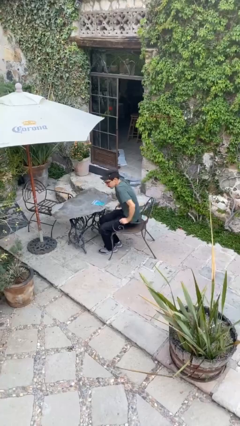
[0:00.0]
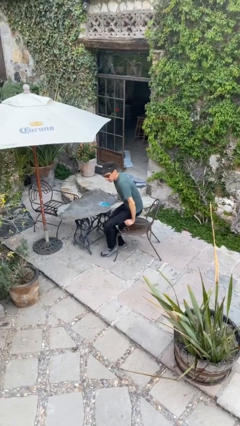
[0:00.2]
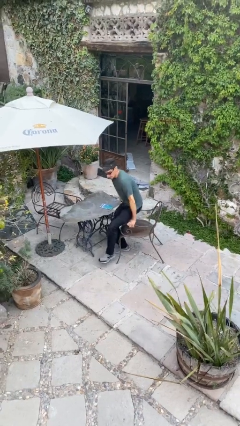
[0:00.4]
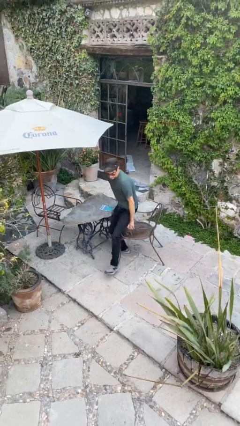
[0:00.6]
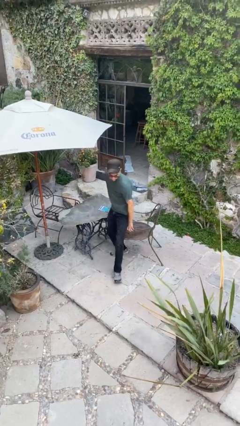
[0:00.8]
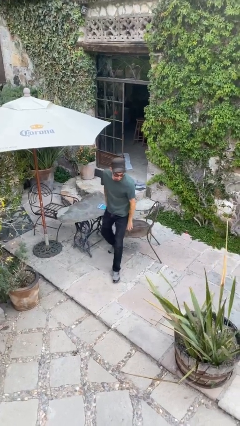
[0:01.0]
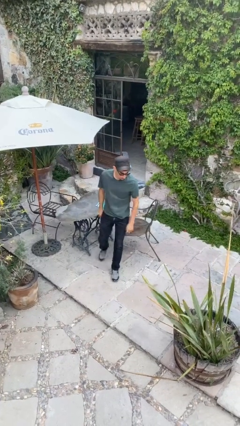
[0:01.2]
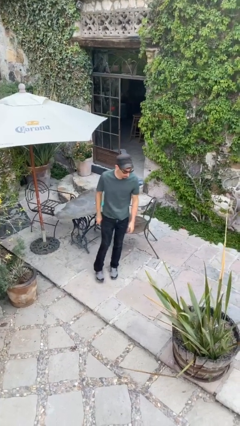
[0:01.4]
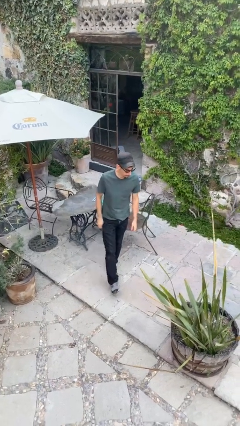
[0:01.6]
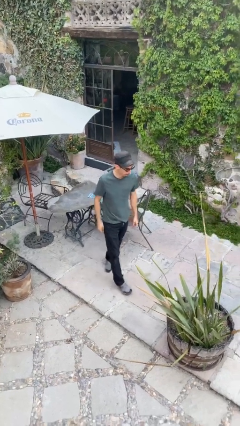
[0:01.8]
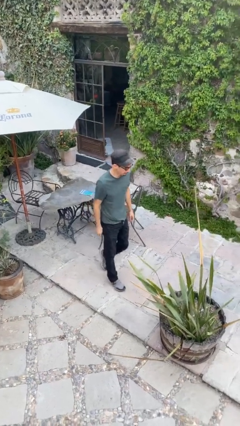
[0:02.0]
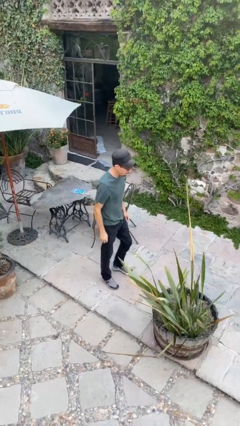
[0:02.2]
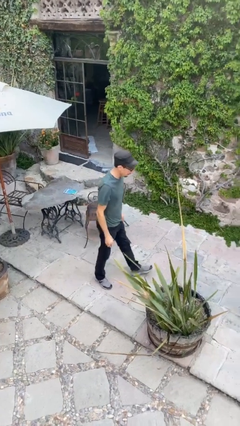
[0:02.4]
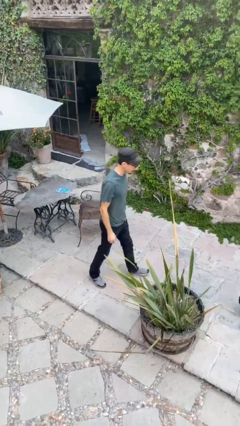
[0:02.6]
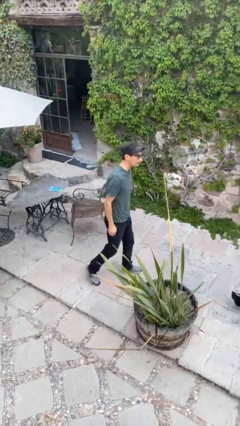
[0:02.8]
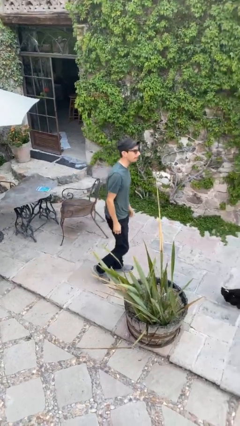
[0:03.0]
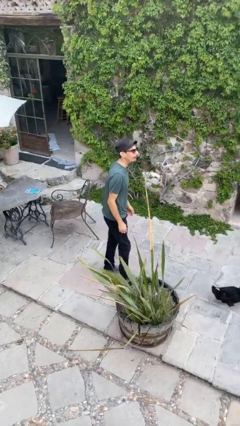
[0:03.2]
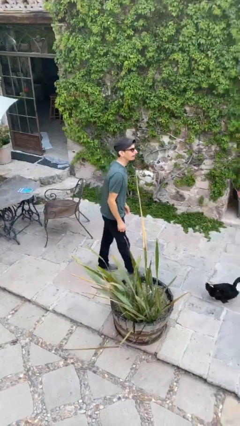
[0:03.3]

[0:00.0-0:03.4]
person stands up

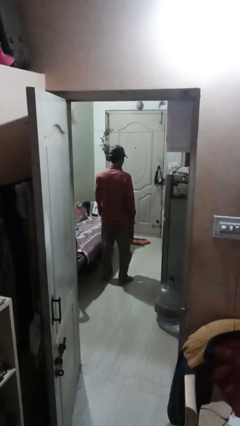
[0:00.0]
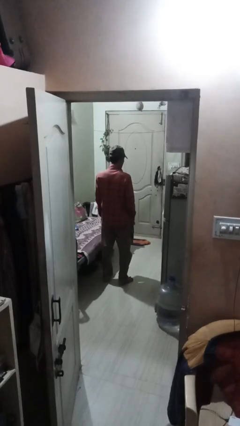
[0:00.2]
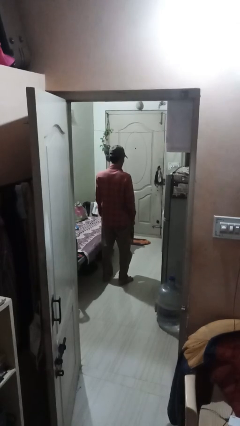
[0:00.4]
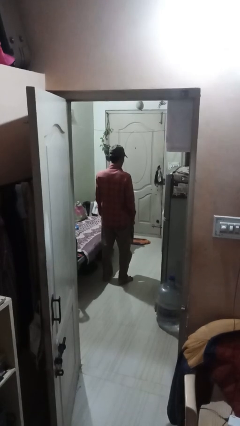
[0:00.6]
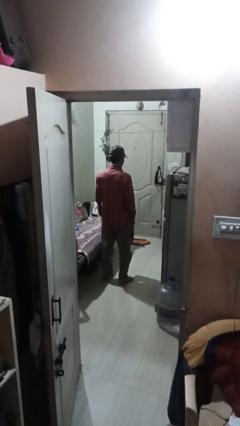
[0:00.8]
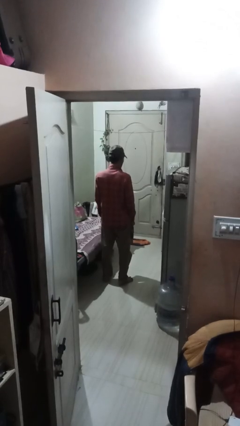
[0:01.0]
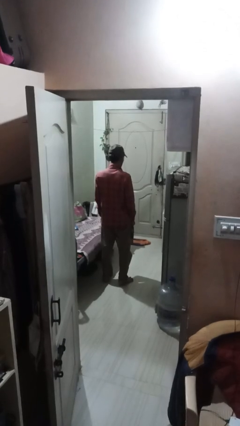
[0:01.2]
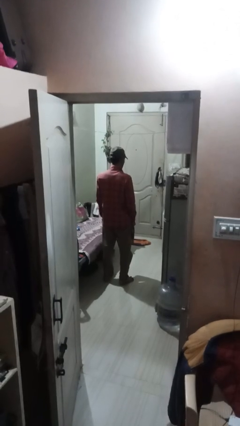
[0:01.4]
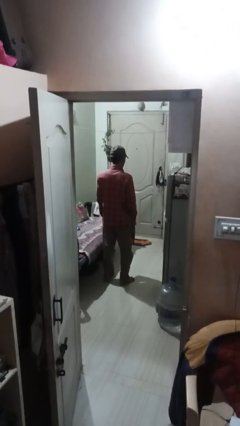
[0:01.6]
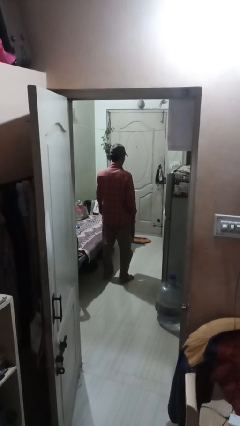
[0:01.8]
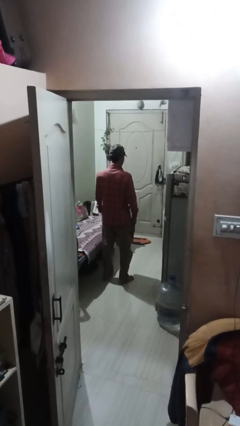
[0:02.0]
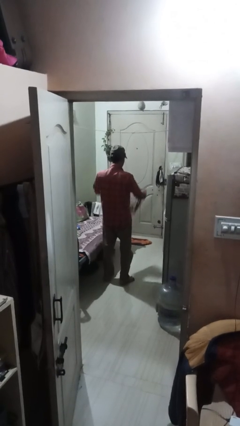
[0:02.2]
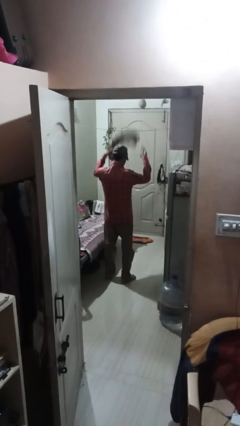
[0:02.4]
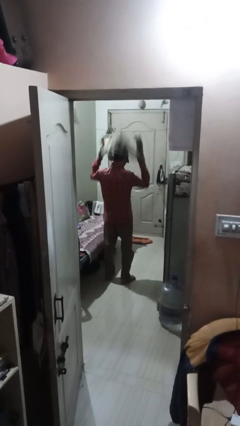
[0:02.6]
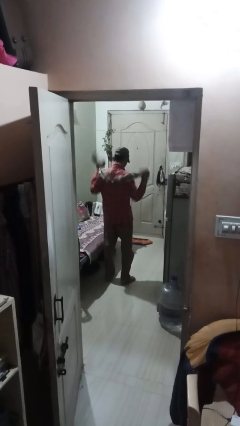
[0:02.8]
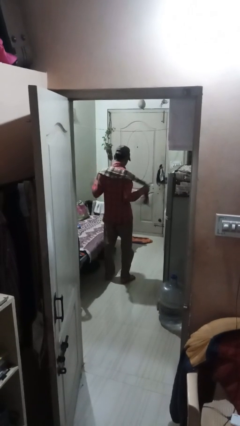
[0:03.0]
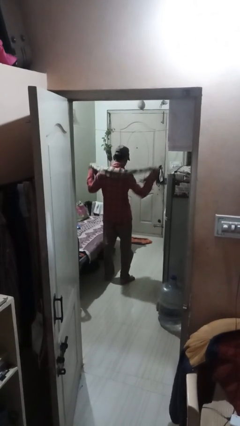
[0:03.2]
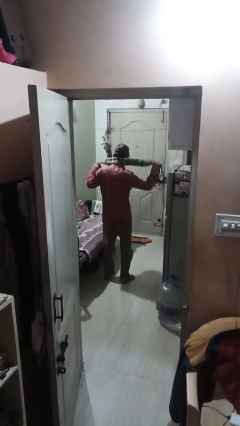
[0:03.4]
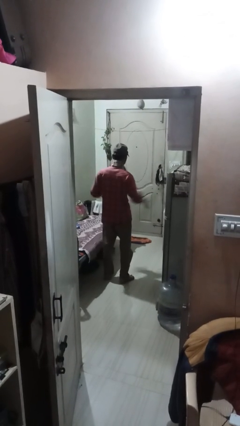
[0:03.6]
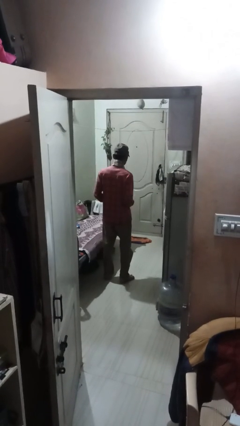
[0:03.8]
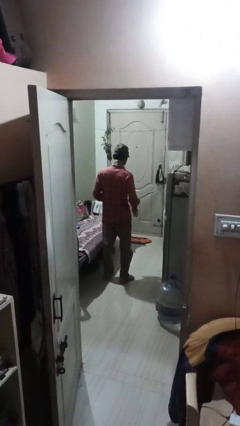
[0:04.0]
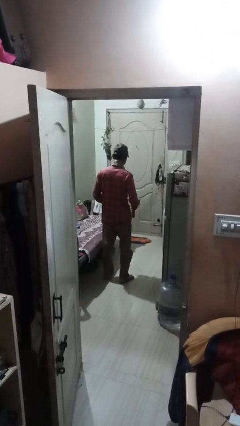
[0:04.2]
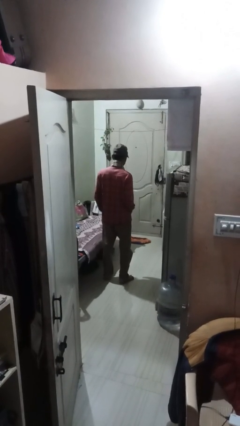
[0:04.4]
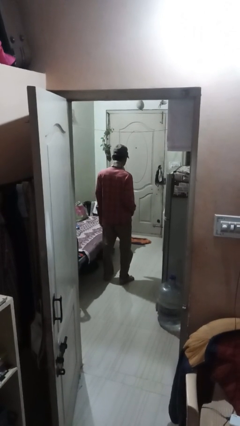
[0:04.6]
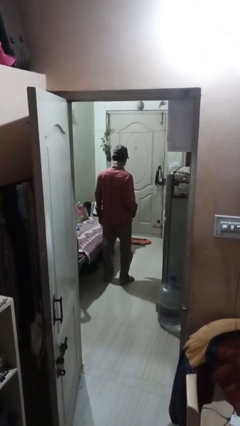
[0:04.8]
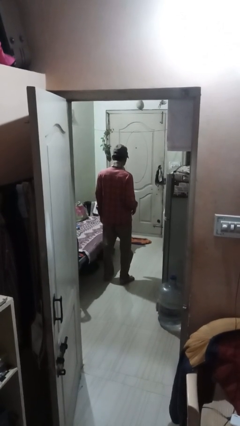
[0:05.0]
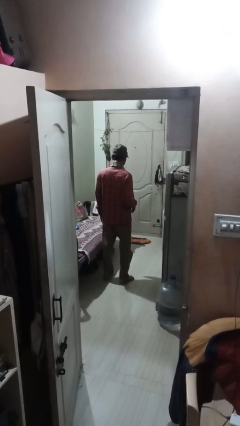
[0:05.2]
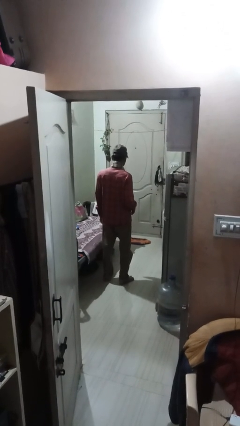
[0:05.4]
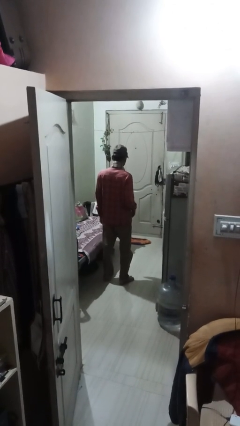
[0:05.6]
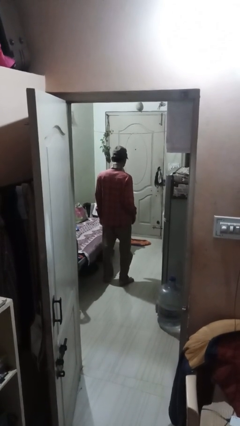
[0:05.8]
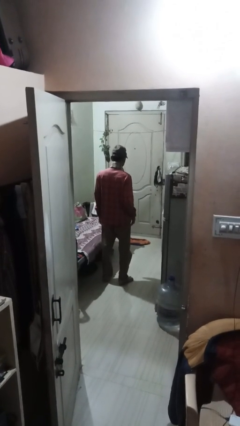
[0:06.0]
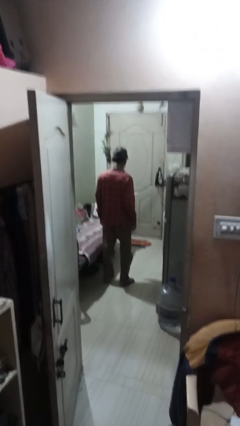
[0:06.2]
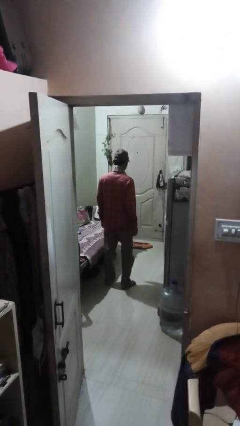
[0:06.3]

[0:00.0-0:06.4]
person puts on scarf

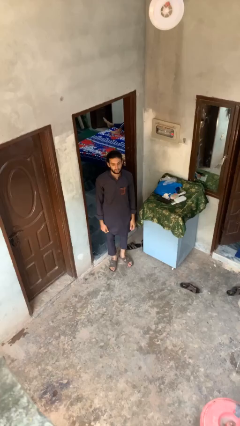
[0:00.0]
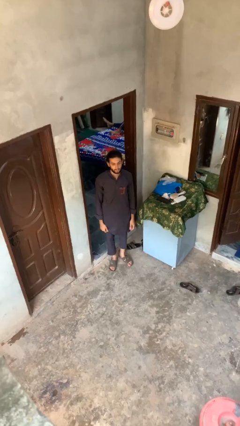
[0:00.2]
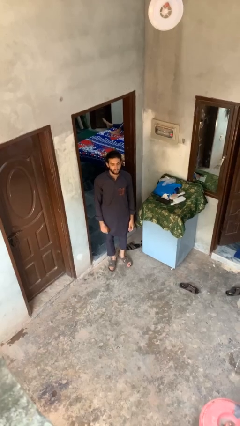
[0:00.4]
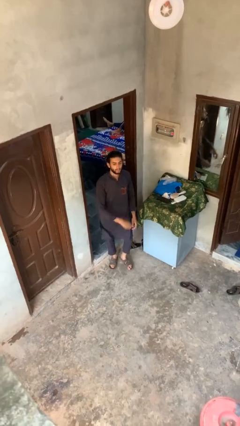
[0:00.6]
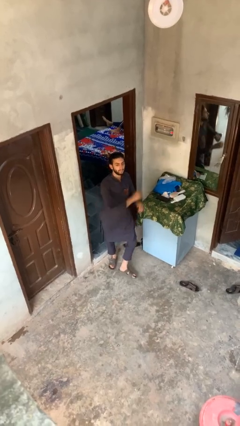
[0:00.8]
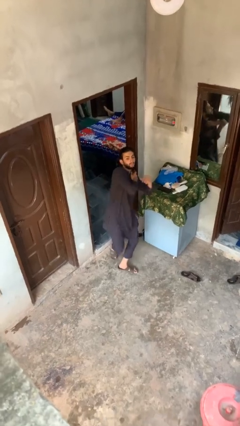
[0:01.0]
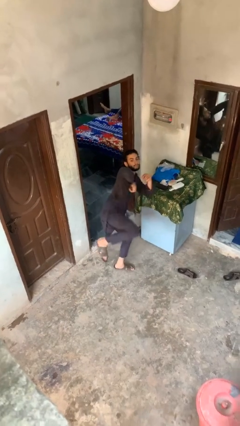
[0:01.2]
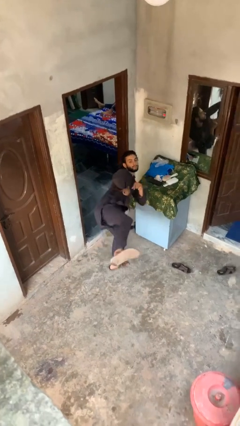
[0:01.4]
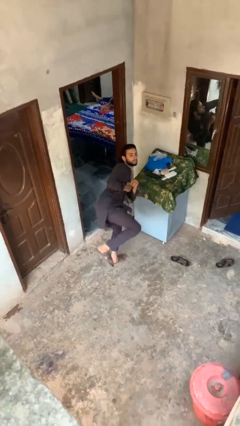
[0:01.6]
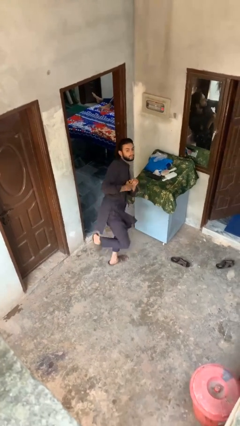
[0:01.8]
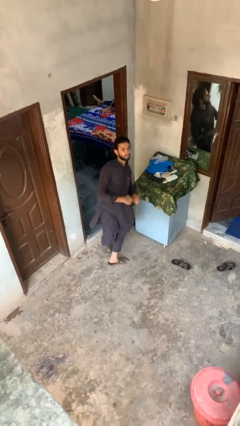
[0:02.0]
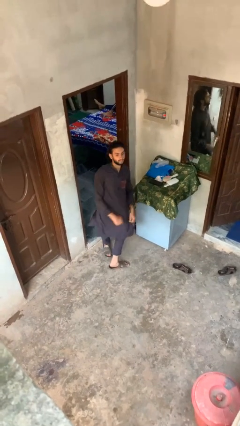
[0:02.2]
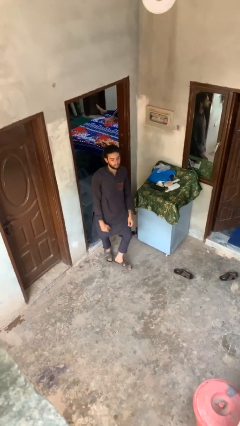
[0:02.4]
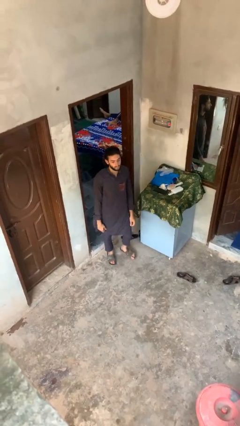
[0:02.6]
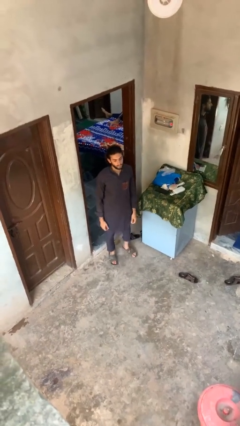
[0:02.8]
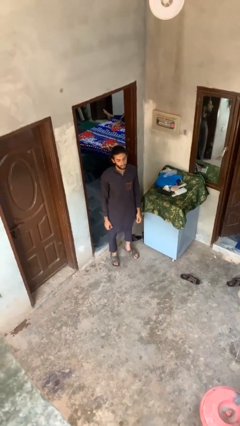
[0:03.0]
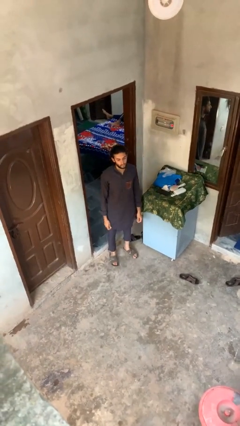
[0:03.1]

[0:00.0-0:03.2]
person karate kicks

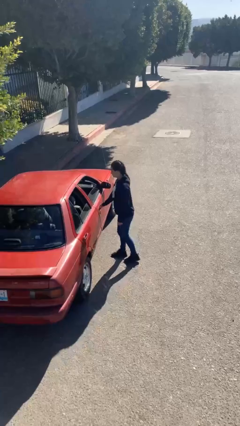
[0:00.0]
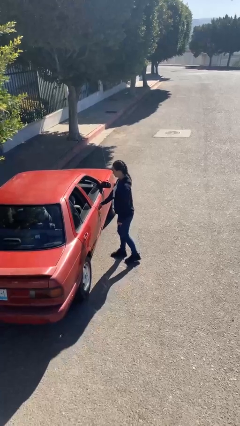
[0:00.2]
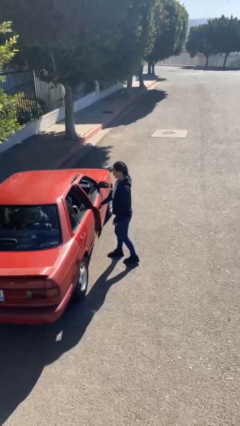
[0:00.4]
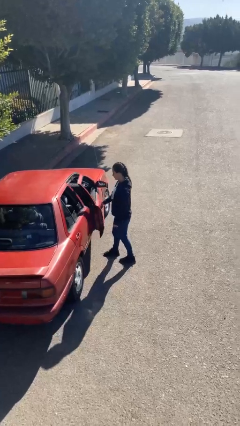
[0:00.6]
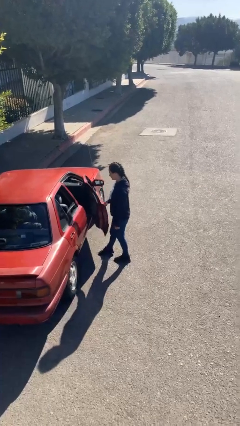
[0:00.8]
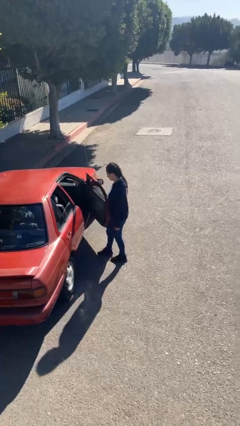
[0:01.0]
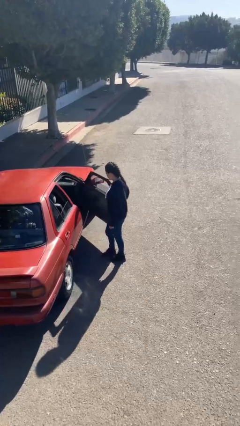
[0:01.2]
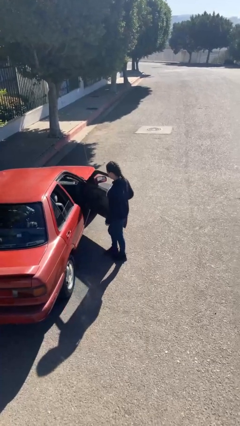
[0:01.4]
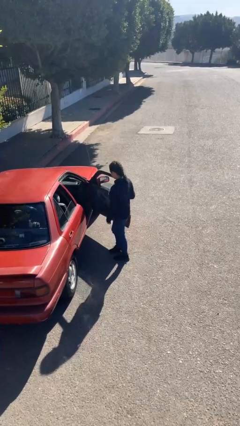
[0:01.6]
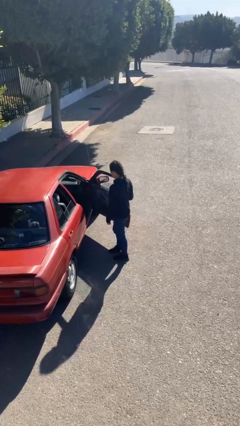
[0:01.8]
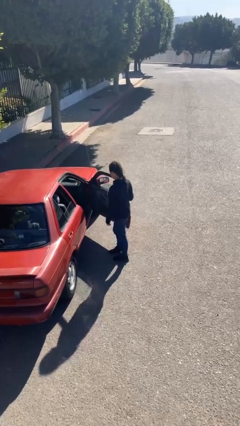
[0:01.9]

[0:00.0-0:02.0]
person opens car door

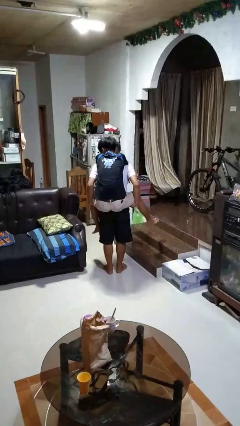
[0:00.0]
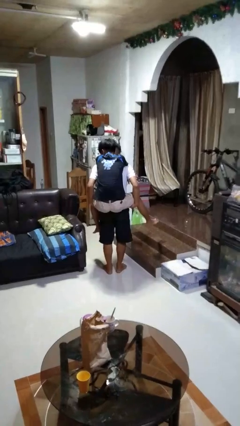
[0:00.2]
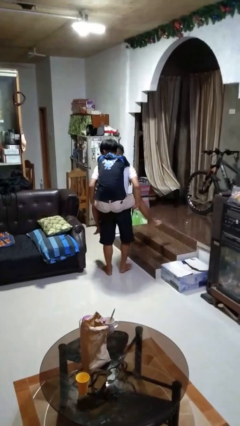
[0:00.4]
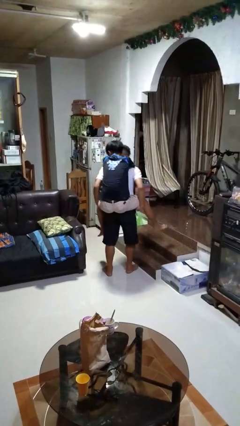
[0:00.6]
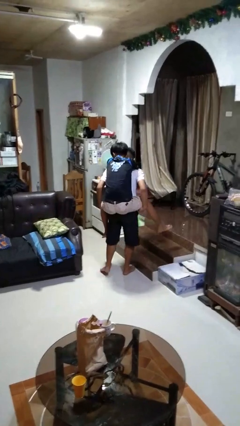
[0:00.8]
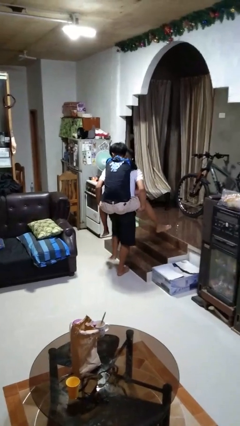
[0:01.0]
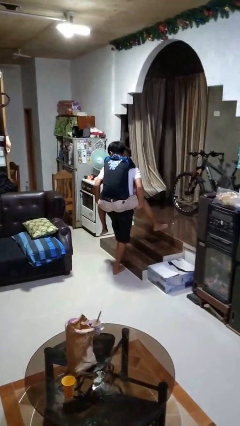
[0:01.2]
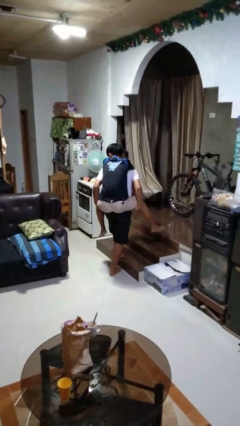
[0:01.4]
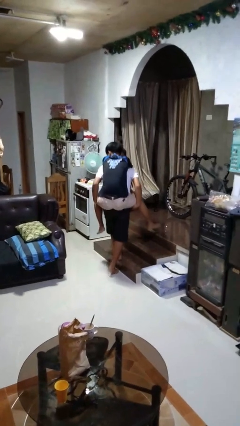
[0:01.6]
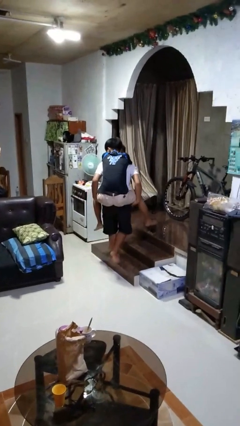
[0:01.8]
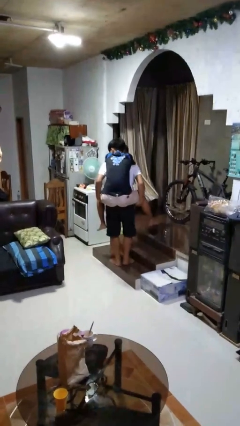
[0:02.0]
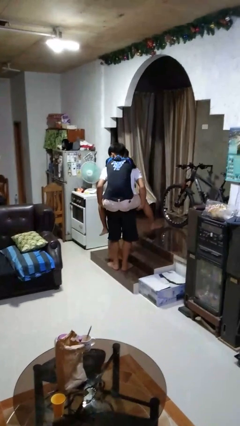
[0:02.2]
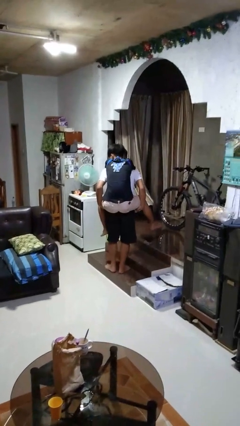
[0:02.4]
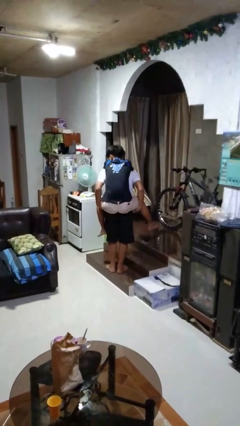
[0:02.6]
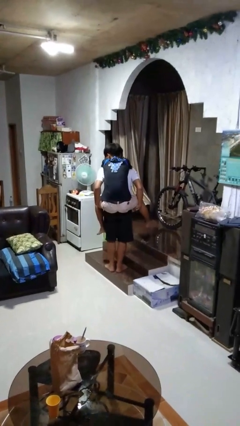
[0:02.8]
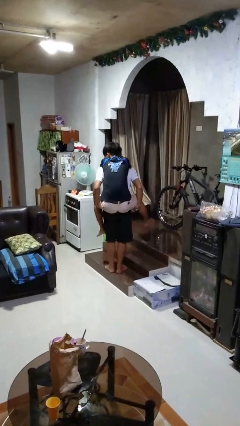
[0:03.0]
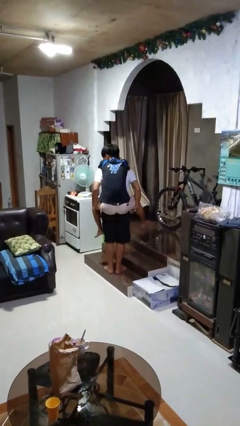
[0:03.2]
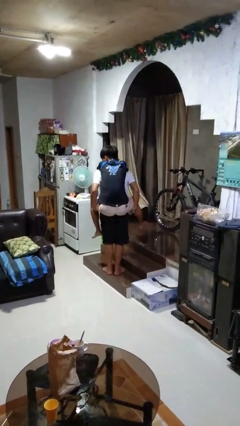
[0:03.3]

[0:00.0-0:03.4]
person carries person on back
